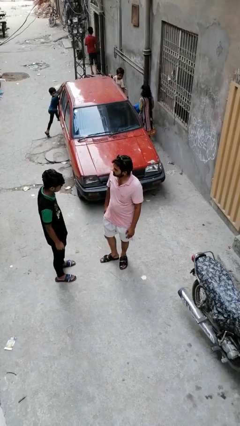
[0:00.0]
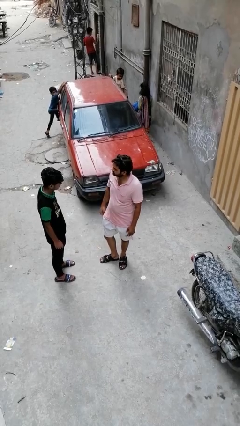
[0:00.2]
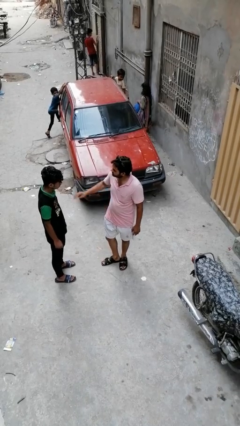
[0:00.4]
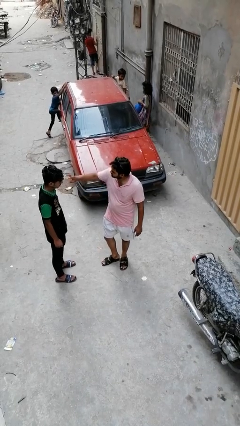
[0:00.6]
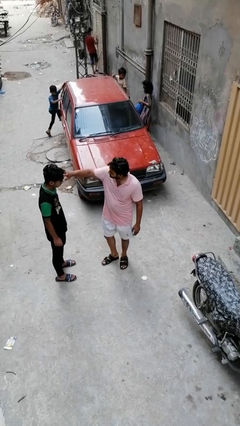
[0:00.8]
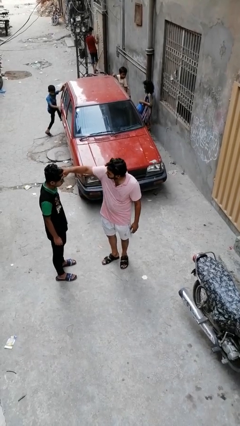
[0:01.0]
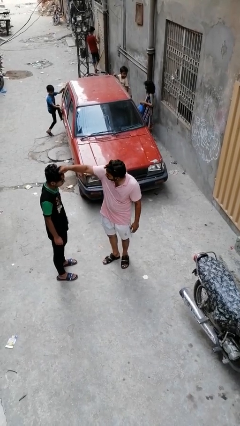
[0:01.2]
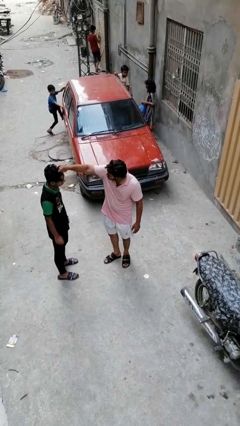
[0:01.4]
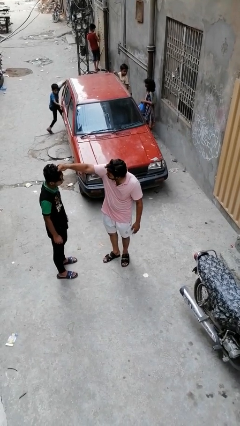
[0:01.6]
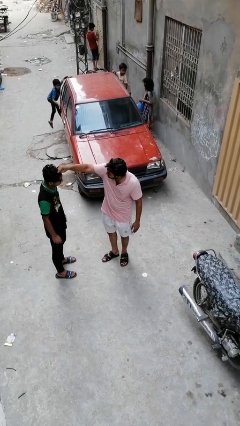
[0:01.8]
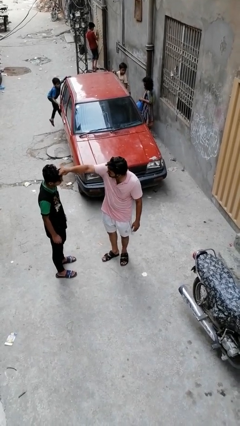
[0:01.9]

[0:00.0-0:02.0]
person grabs person by hair

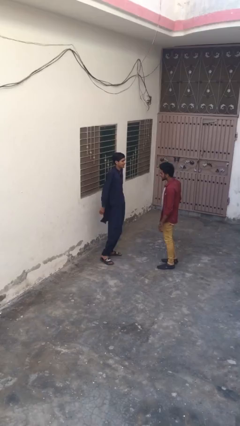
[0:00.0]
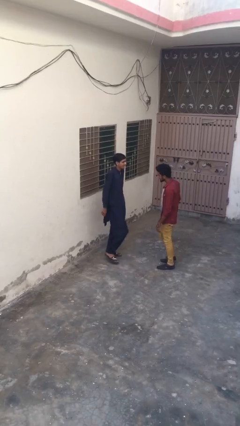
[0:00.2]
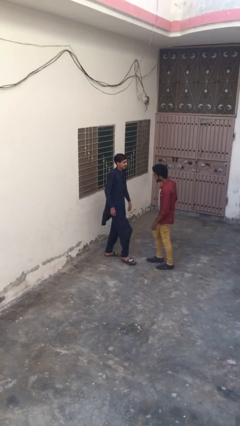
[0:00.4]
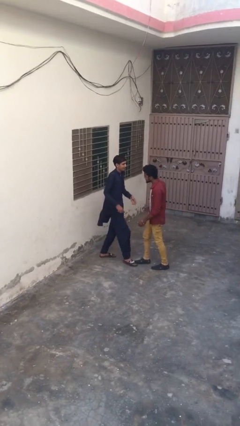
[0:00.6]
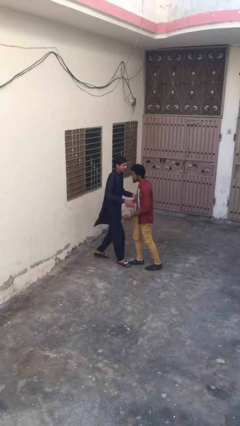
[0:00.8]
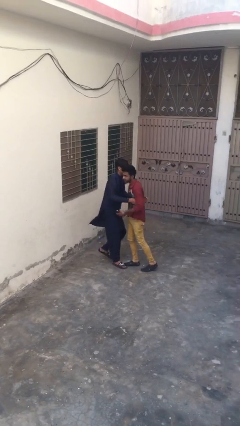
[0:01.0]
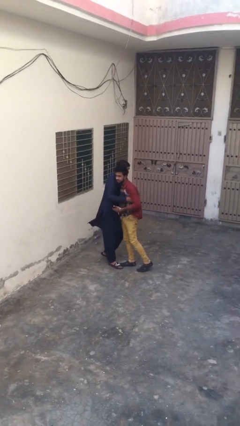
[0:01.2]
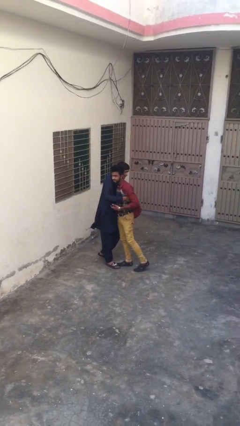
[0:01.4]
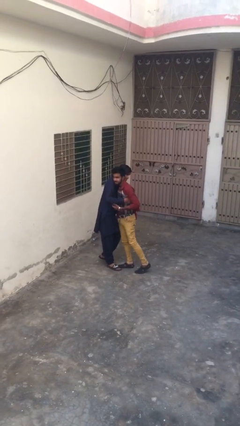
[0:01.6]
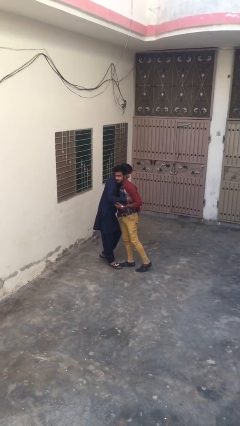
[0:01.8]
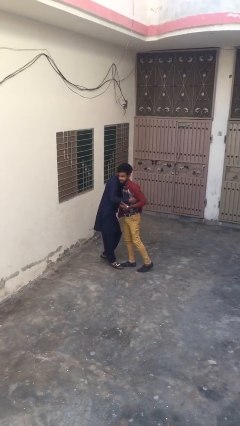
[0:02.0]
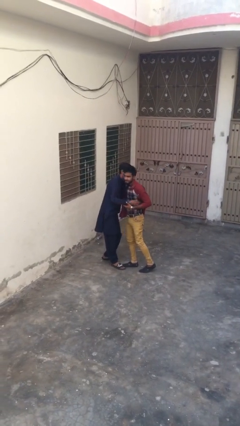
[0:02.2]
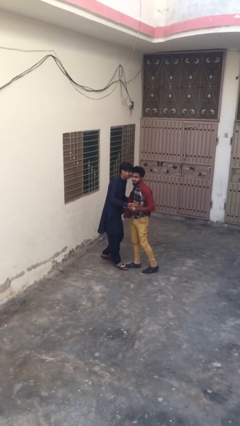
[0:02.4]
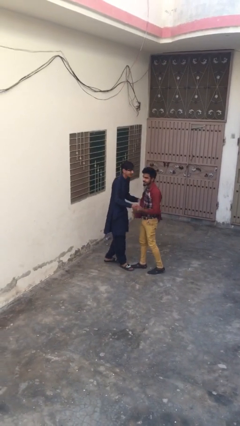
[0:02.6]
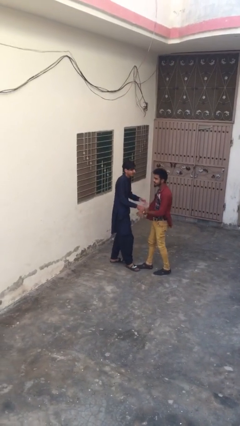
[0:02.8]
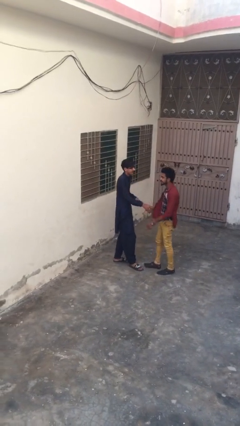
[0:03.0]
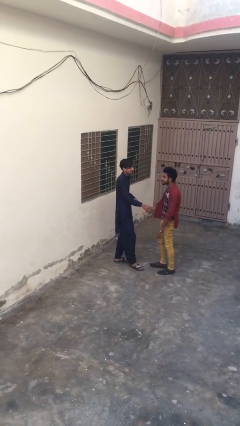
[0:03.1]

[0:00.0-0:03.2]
person embraces person

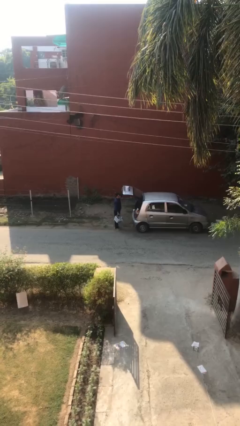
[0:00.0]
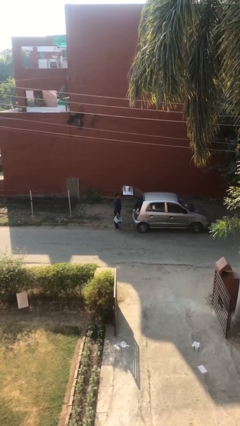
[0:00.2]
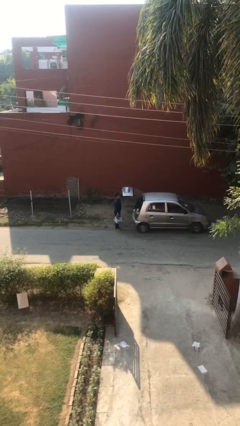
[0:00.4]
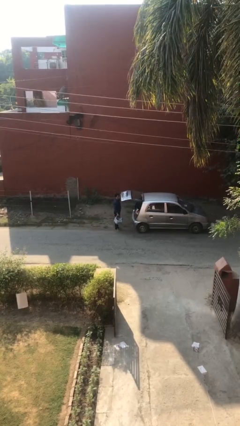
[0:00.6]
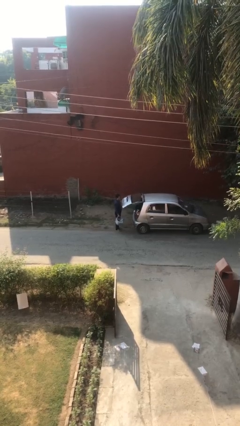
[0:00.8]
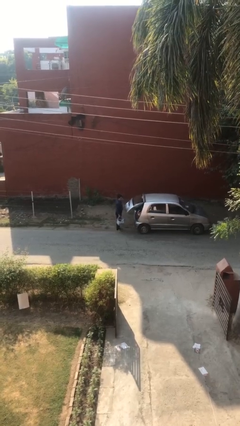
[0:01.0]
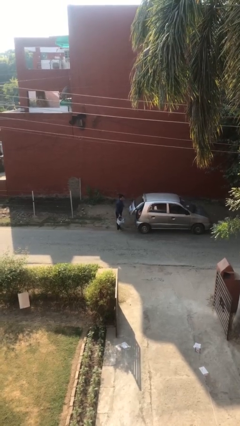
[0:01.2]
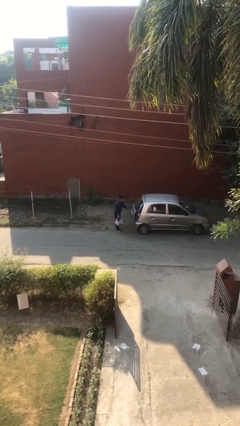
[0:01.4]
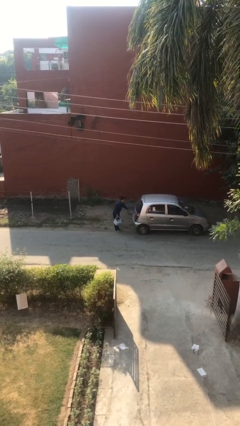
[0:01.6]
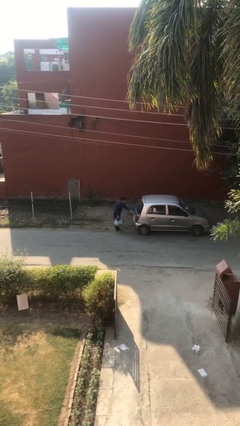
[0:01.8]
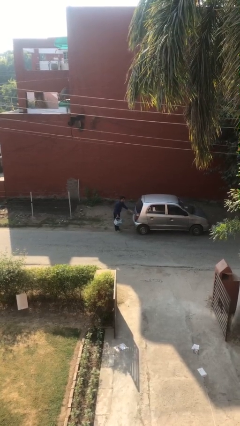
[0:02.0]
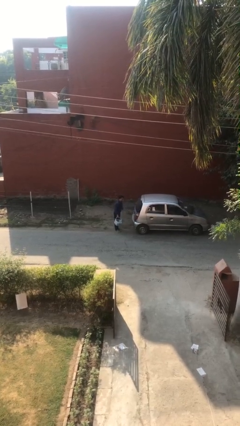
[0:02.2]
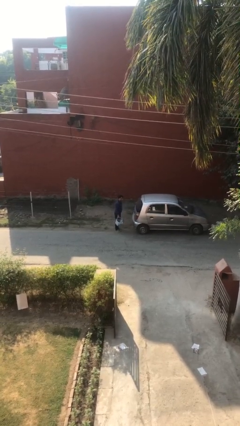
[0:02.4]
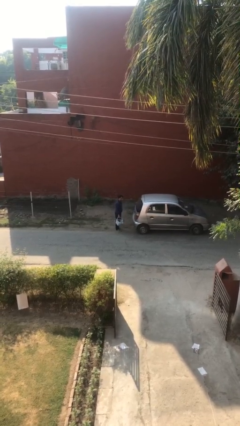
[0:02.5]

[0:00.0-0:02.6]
person closes car trunk

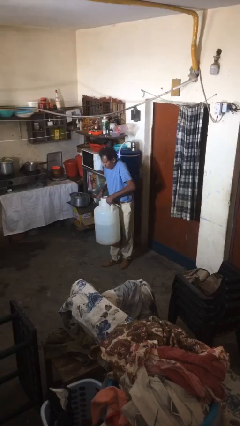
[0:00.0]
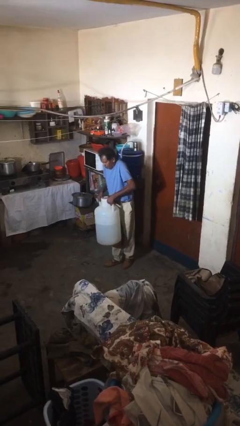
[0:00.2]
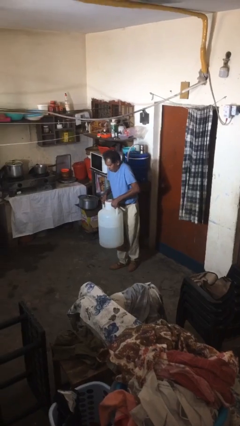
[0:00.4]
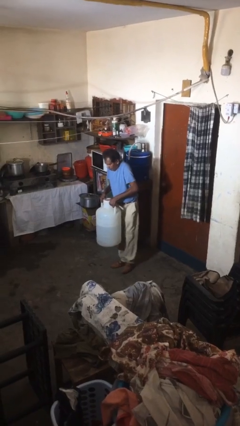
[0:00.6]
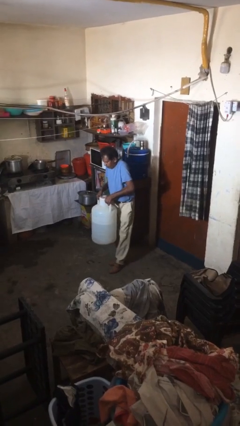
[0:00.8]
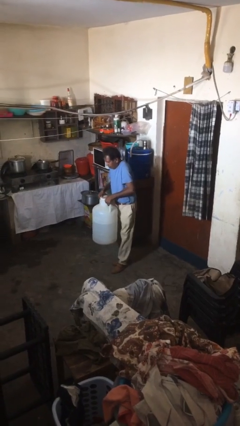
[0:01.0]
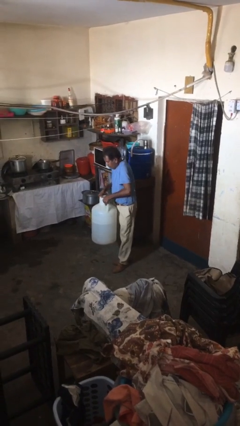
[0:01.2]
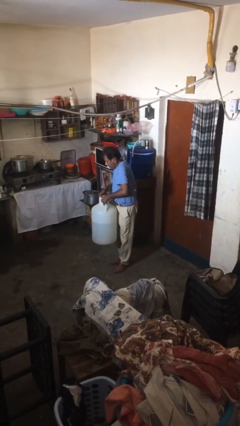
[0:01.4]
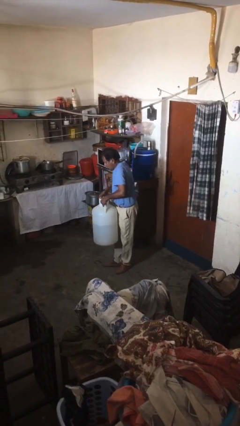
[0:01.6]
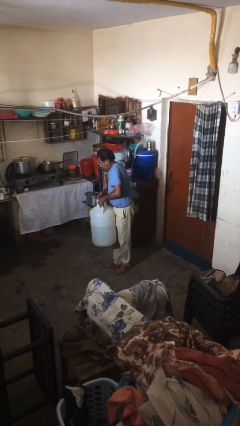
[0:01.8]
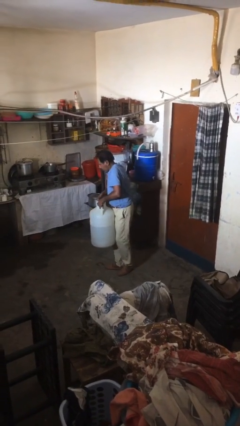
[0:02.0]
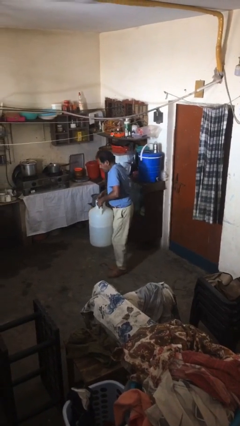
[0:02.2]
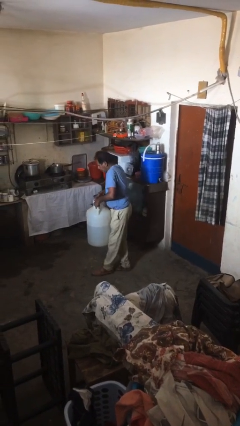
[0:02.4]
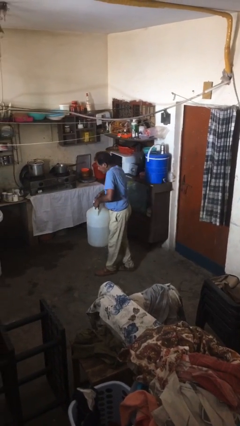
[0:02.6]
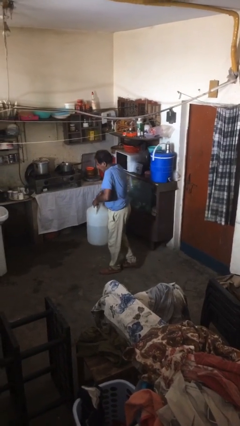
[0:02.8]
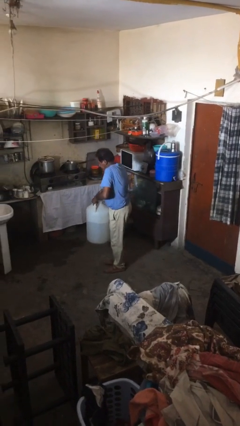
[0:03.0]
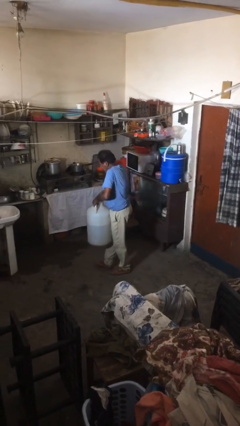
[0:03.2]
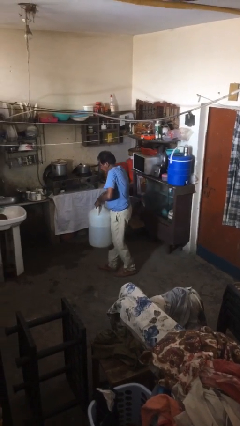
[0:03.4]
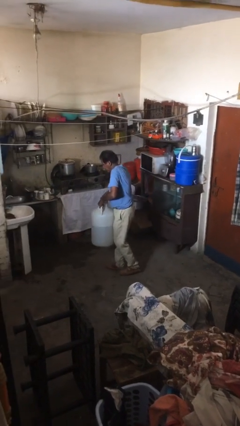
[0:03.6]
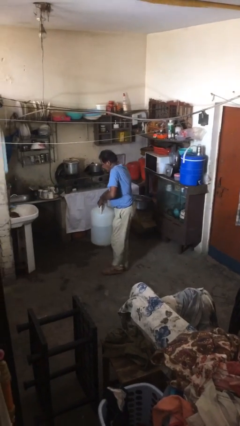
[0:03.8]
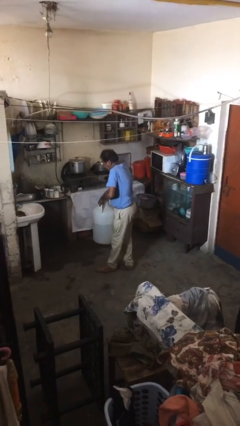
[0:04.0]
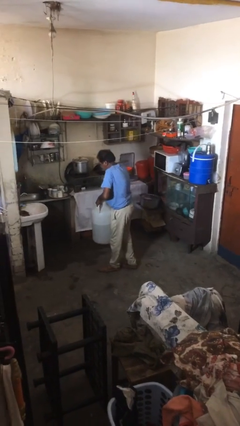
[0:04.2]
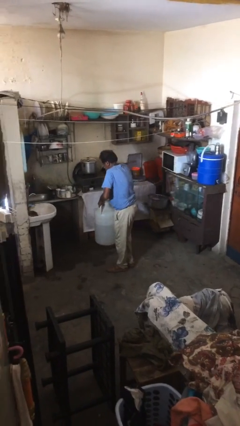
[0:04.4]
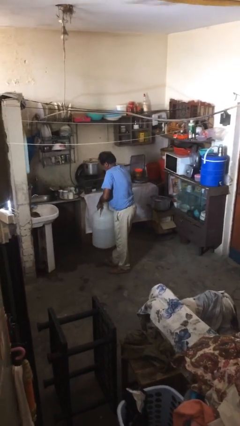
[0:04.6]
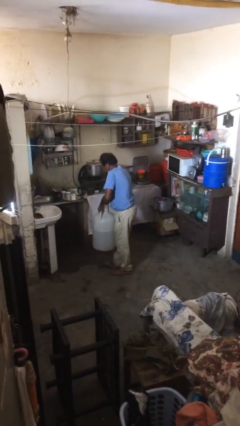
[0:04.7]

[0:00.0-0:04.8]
person carries heavy object

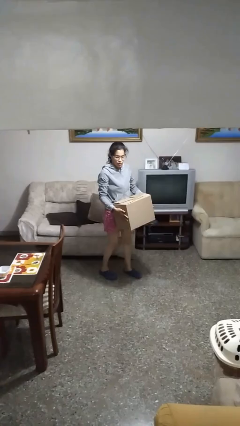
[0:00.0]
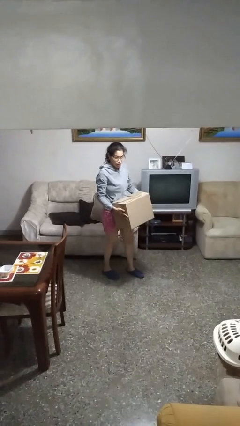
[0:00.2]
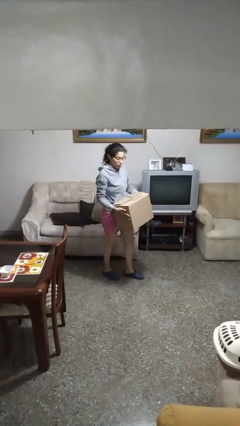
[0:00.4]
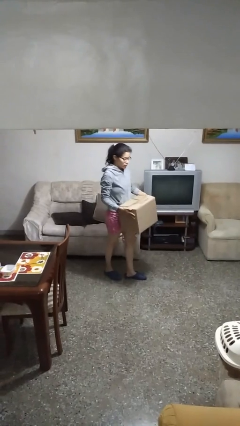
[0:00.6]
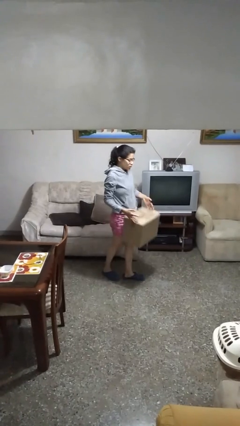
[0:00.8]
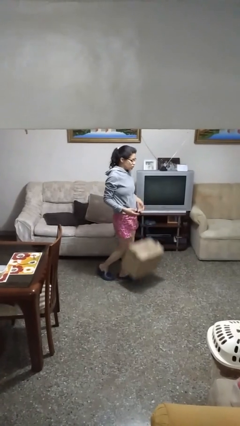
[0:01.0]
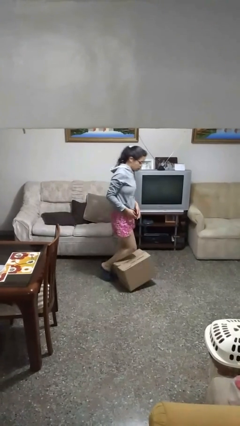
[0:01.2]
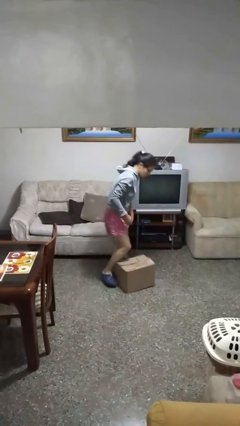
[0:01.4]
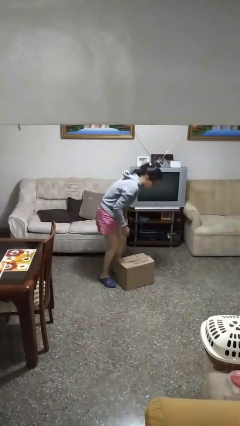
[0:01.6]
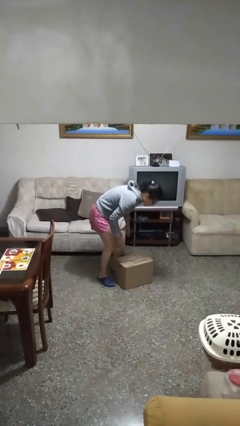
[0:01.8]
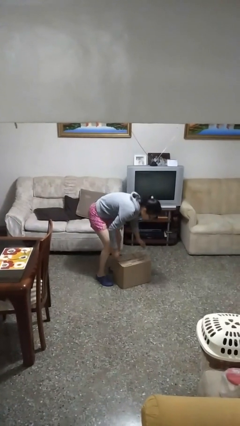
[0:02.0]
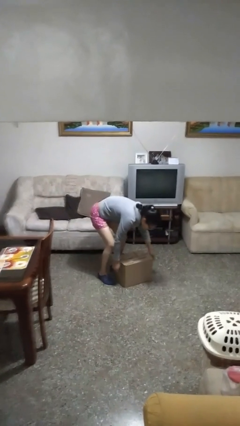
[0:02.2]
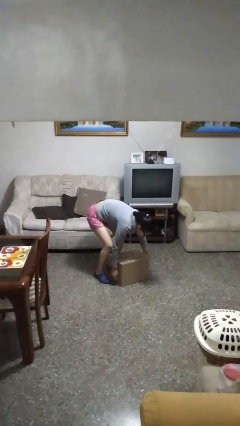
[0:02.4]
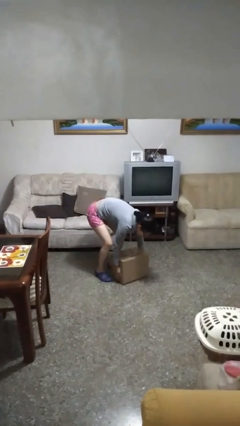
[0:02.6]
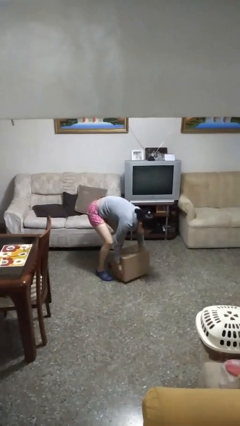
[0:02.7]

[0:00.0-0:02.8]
person drops object

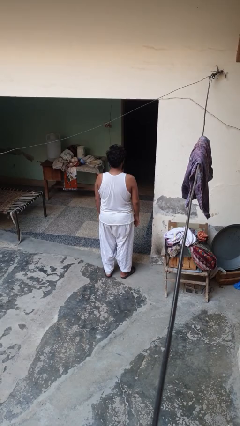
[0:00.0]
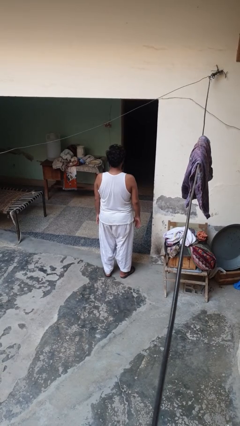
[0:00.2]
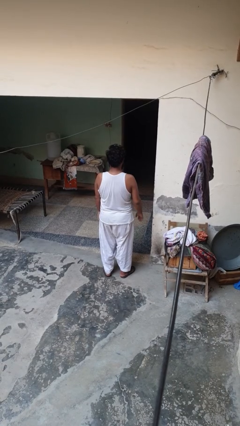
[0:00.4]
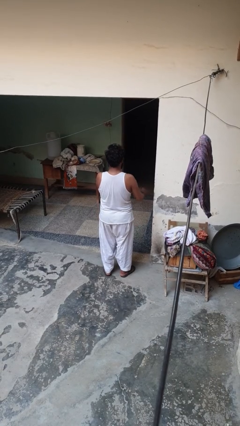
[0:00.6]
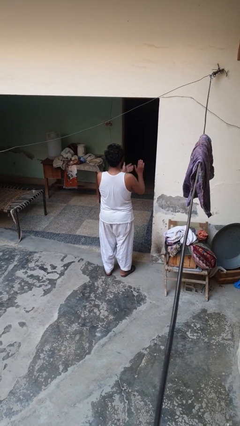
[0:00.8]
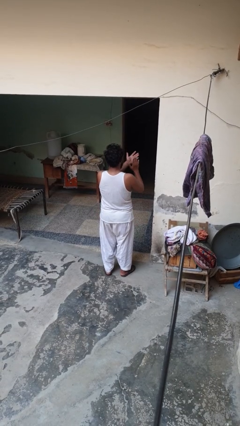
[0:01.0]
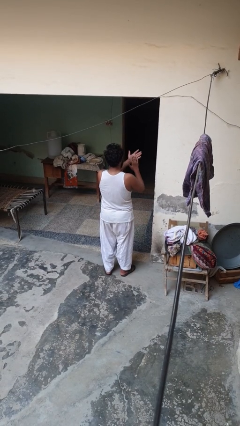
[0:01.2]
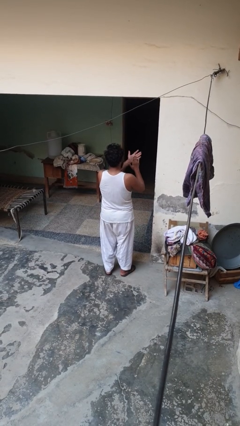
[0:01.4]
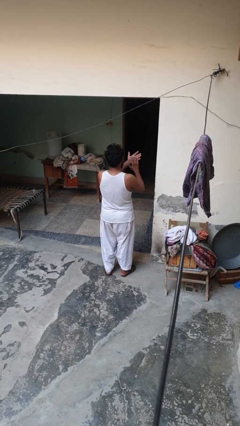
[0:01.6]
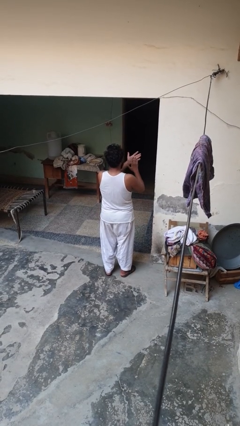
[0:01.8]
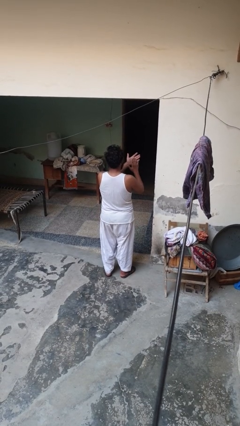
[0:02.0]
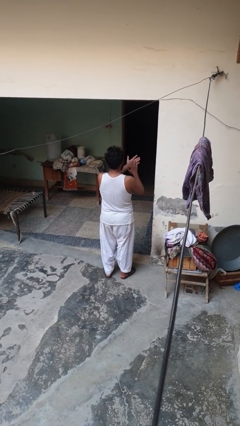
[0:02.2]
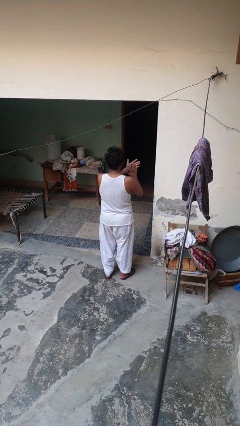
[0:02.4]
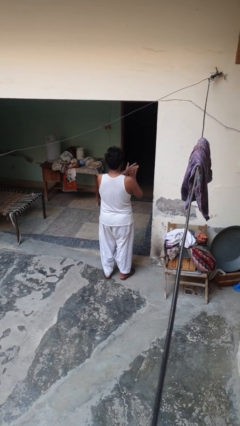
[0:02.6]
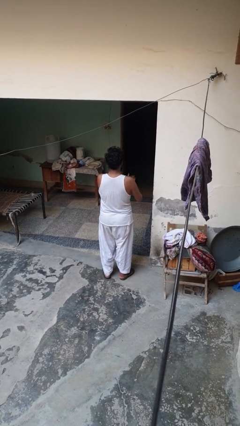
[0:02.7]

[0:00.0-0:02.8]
person claps hands
